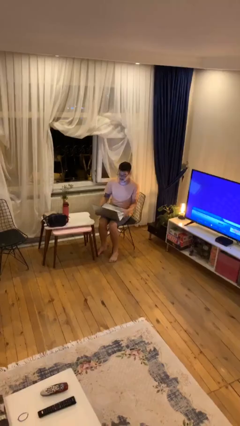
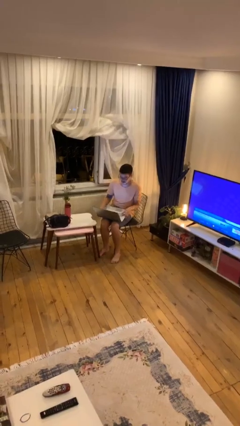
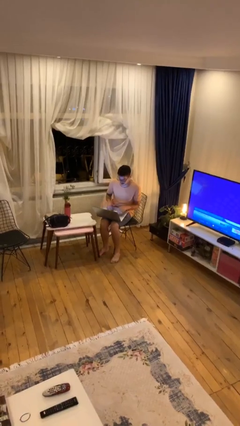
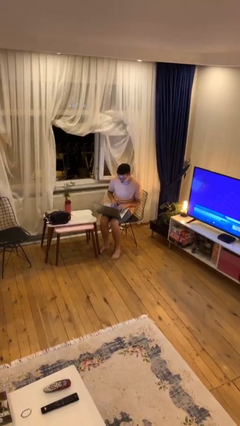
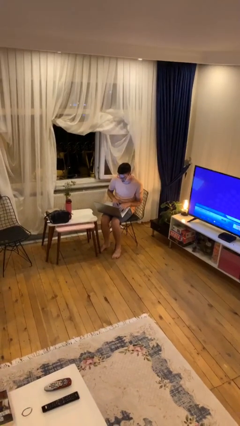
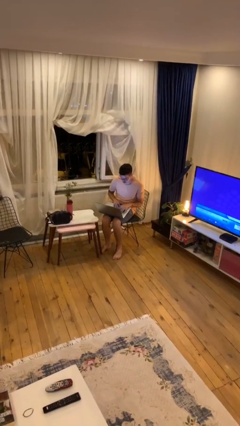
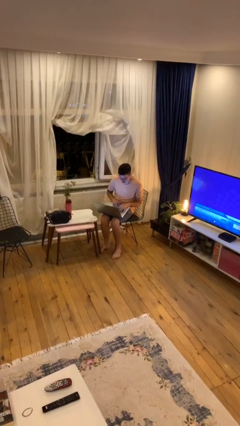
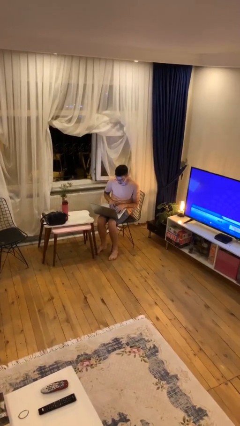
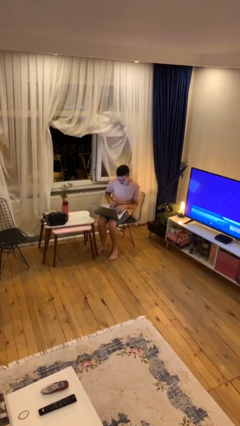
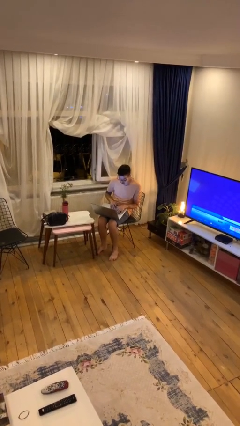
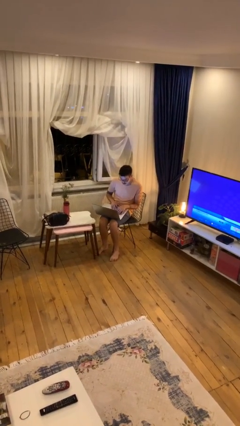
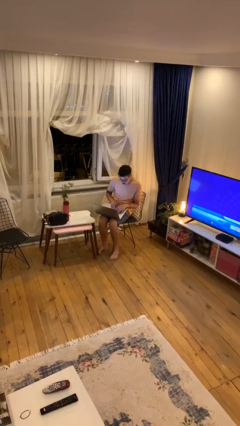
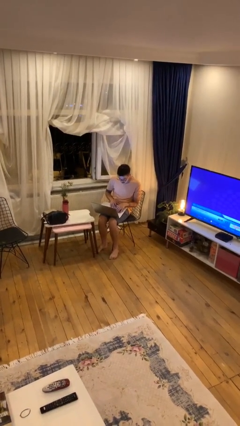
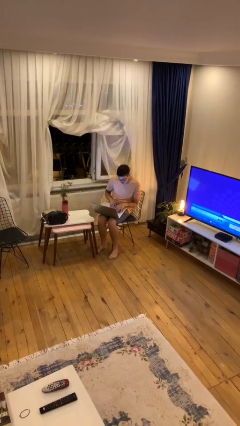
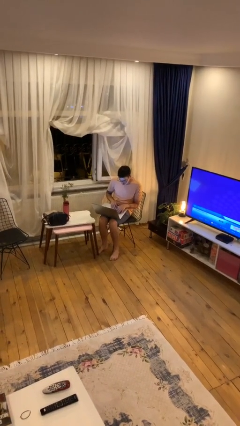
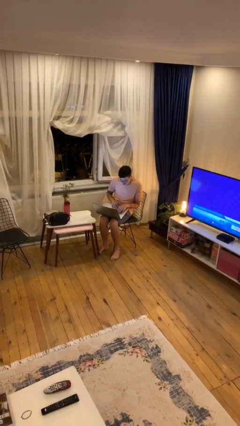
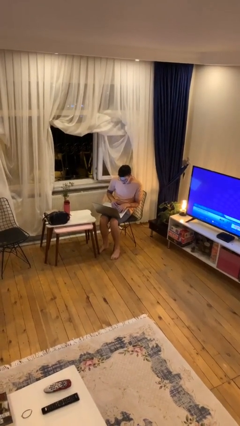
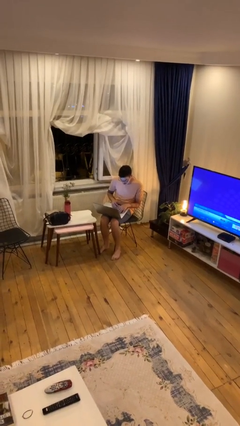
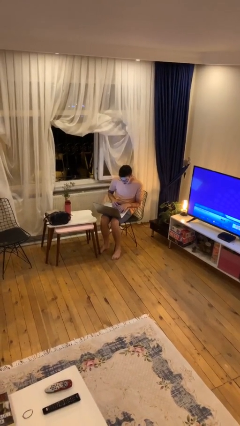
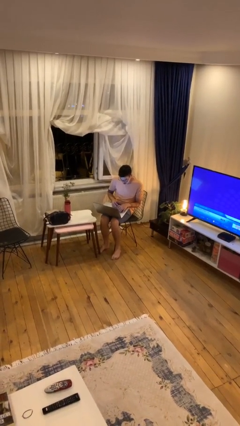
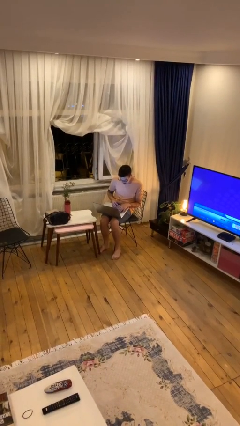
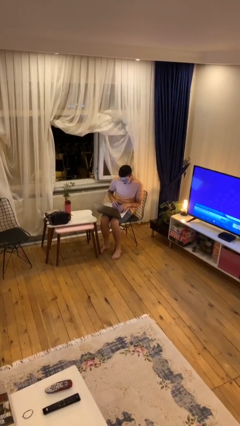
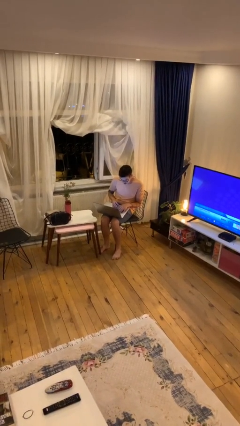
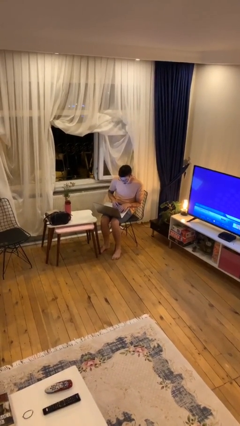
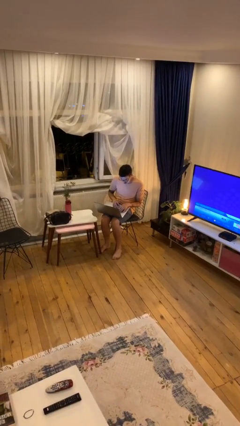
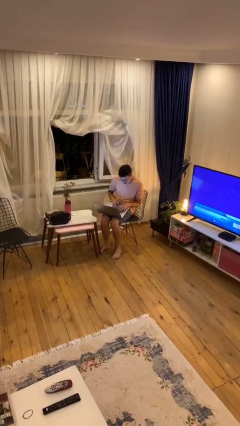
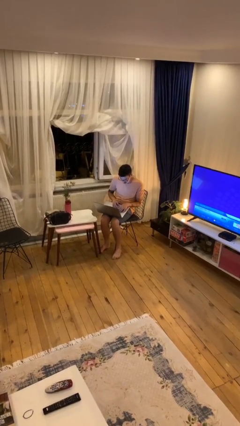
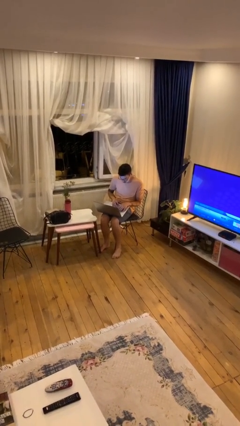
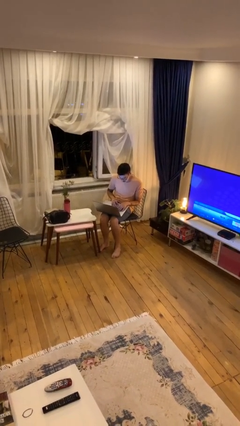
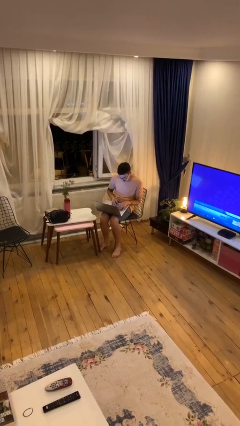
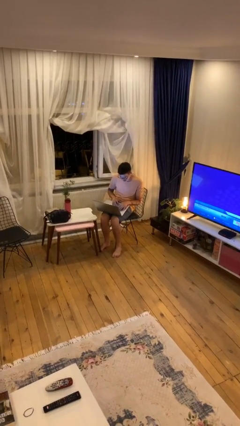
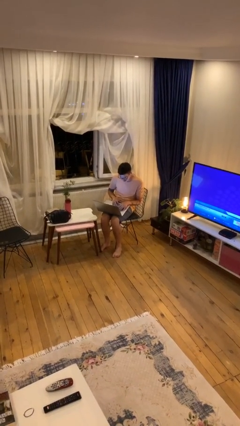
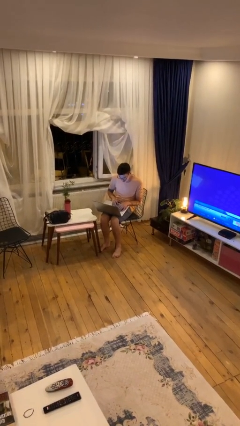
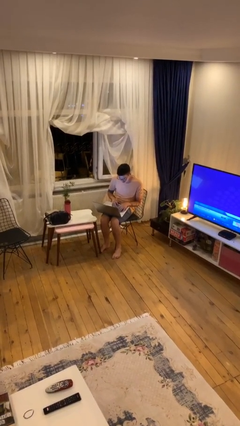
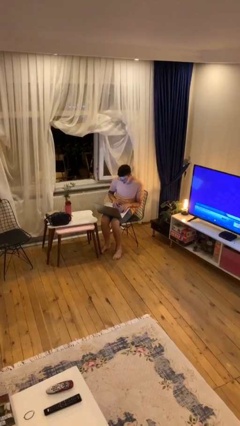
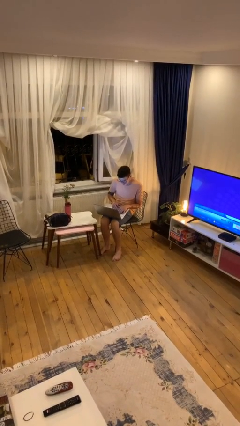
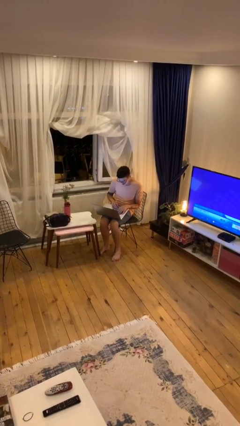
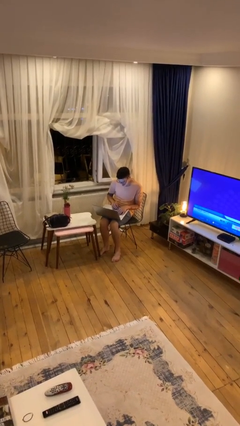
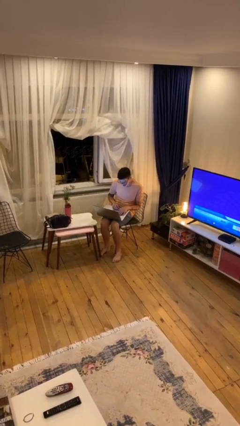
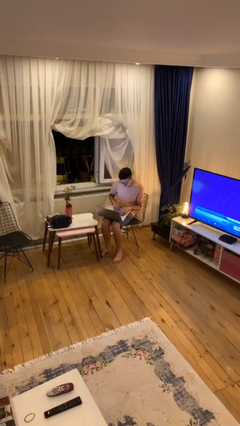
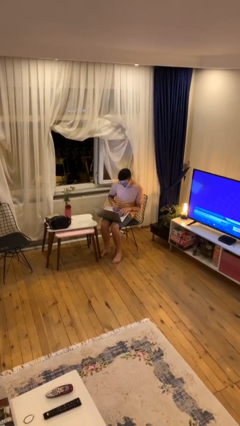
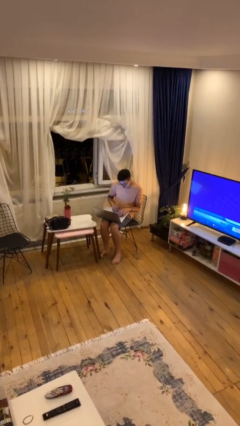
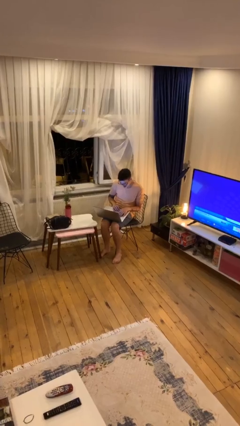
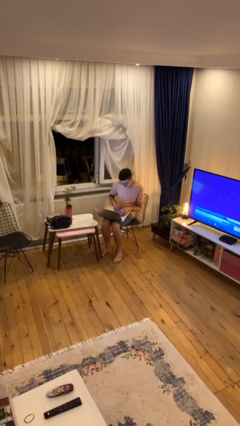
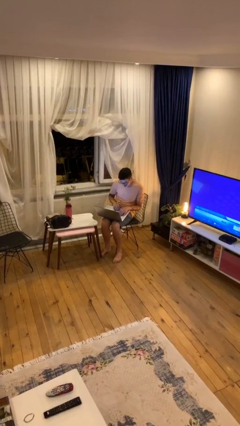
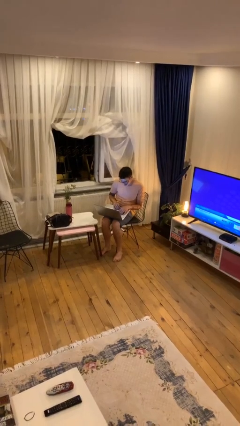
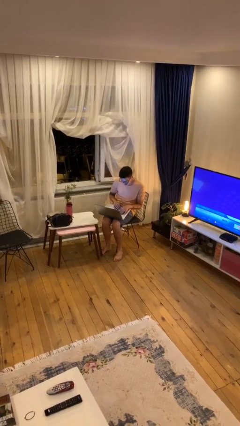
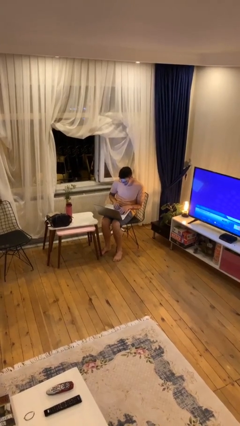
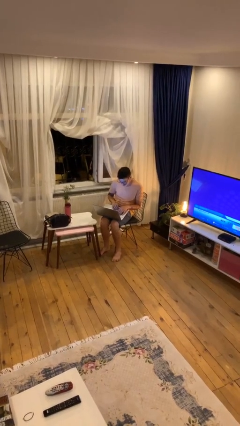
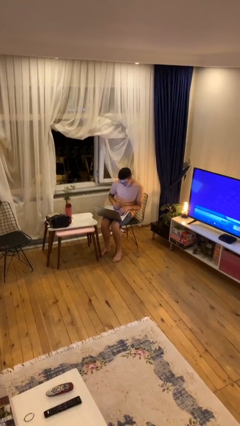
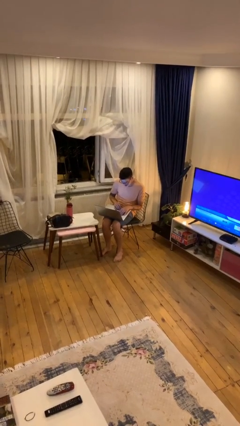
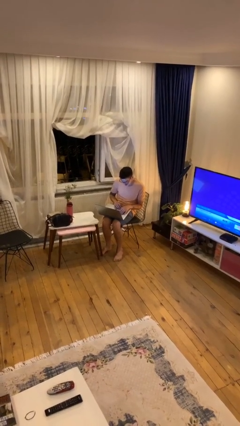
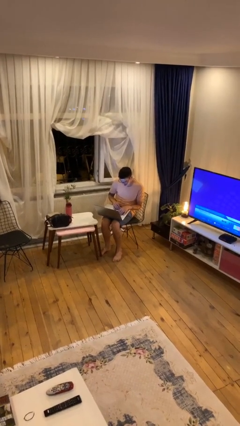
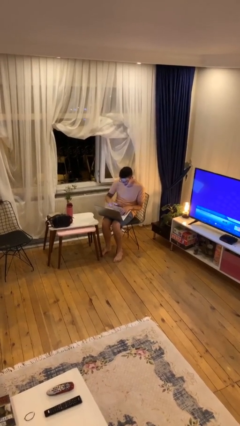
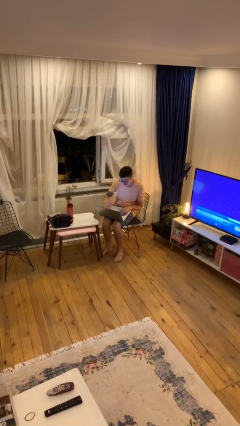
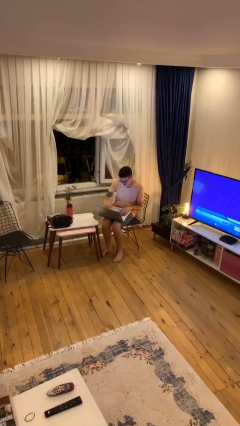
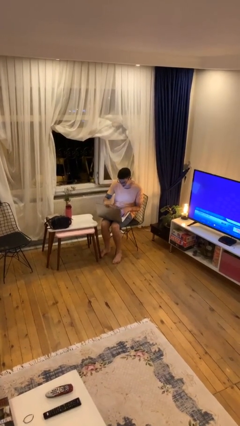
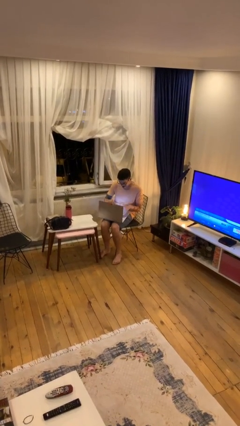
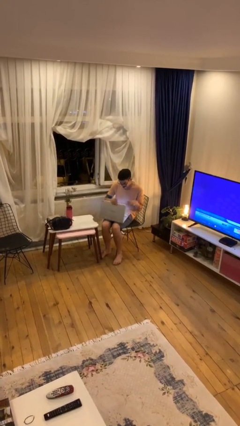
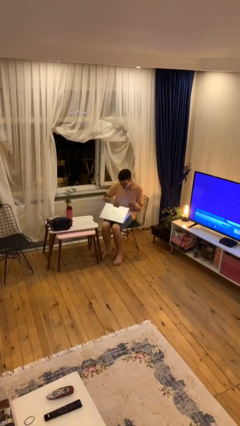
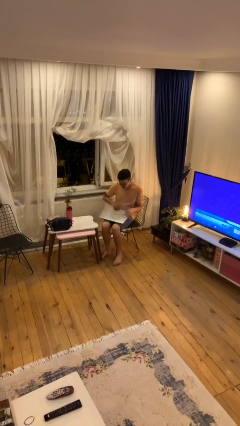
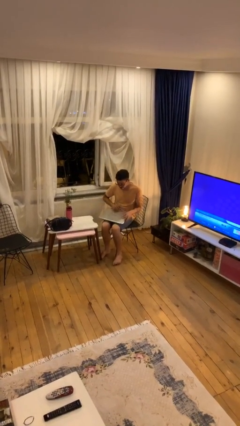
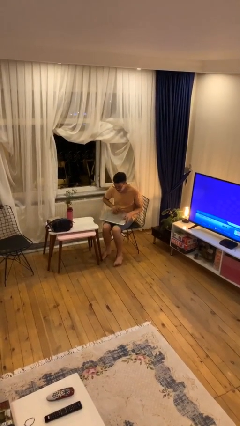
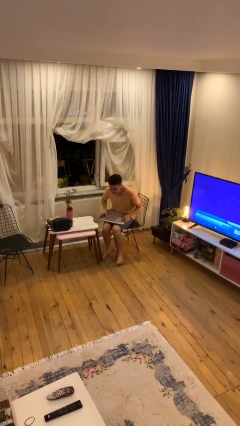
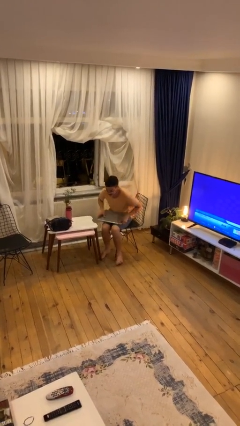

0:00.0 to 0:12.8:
person interacts with laptop

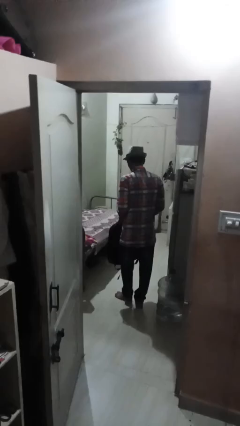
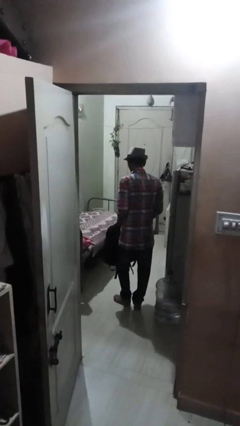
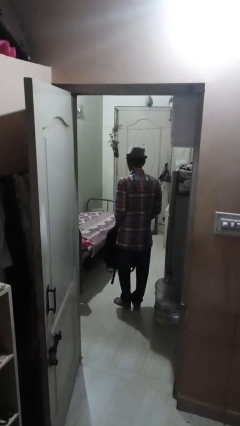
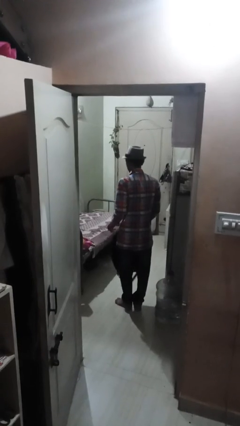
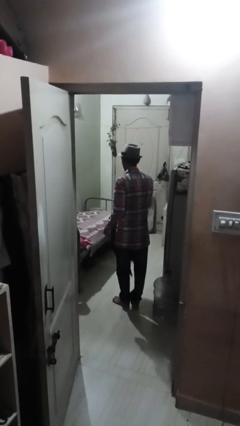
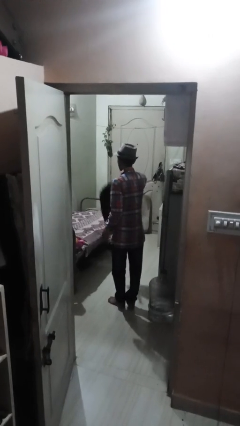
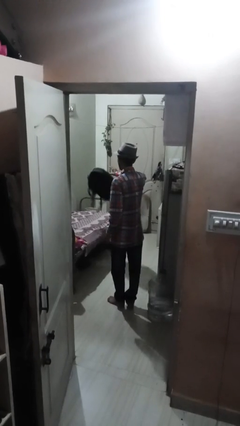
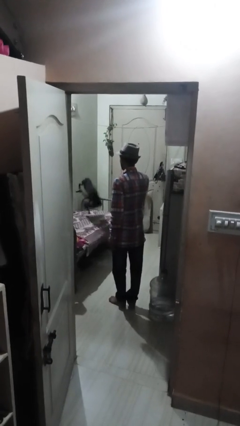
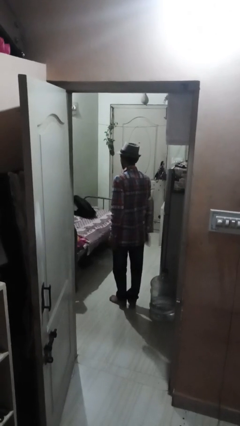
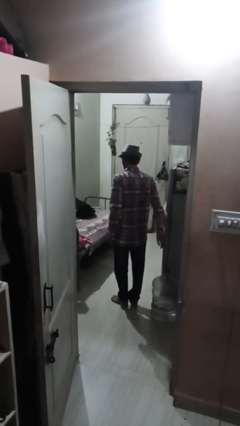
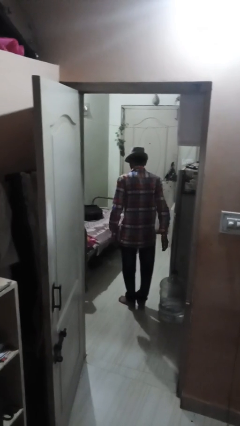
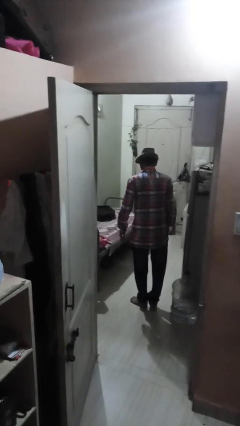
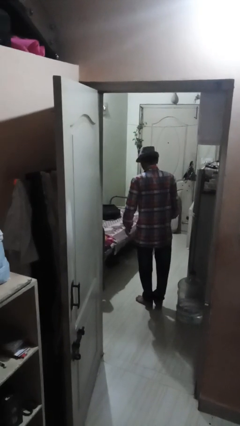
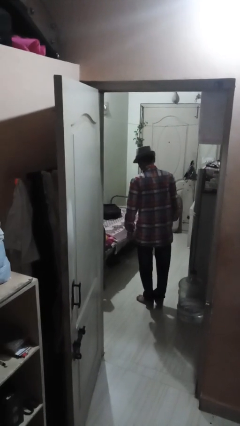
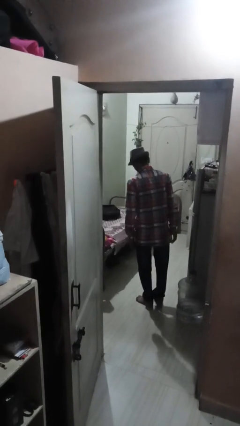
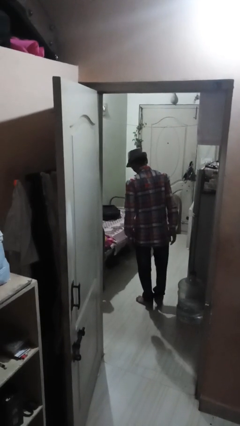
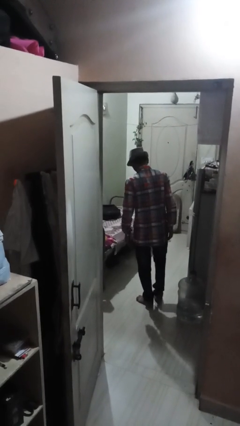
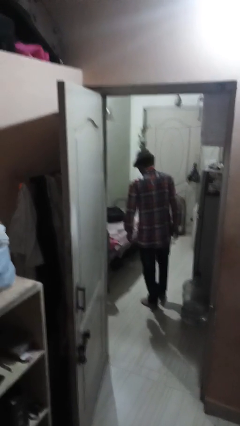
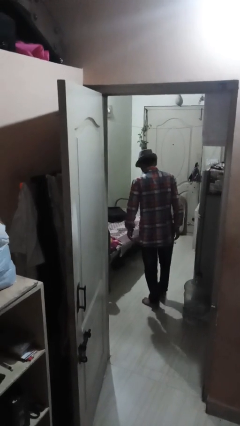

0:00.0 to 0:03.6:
person throws object on bed

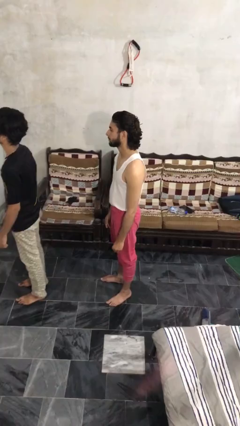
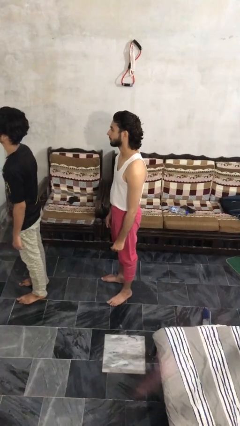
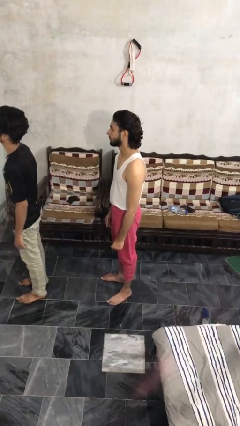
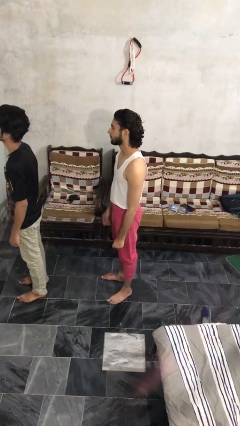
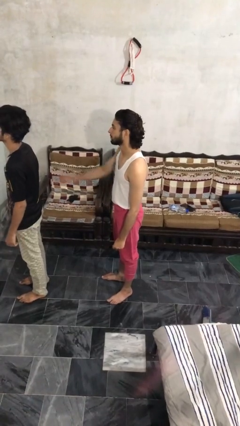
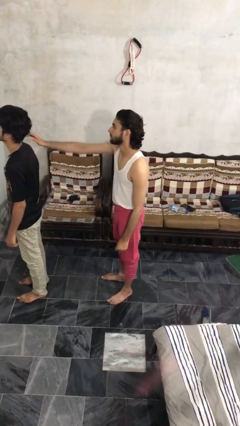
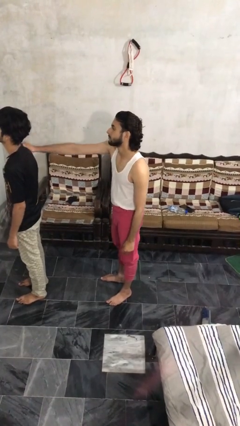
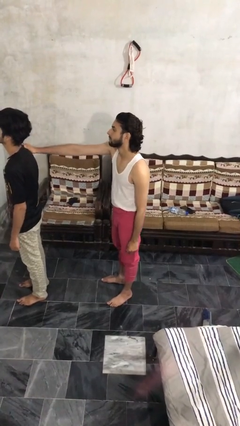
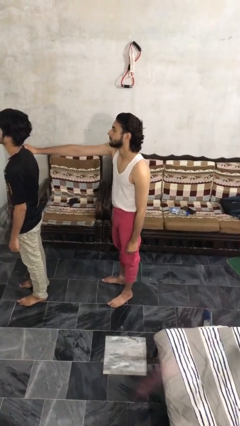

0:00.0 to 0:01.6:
person grabs person by shoulder

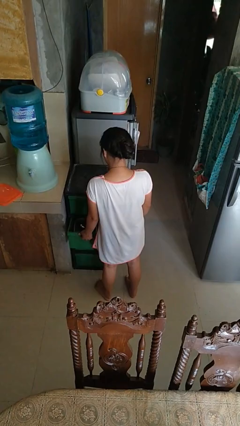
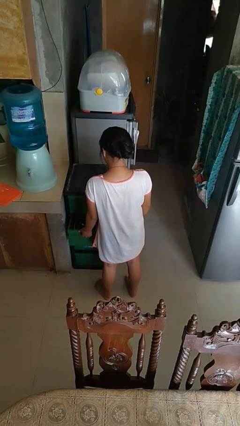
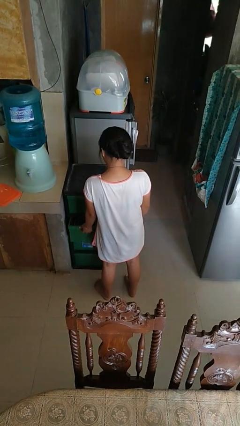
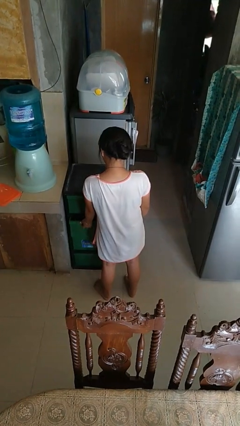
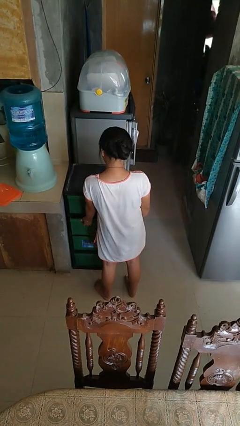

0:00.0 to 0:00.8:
person closes kitchen drawer
